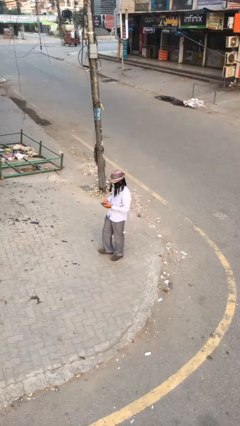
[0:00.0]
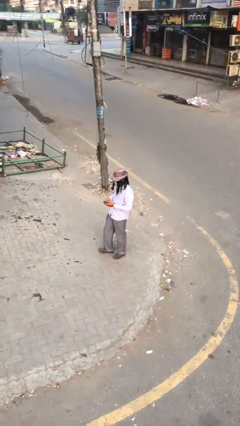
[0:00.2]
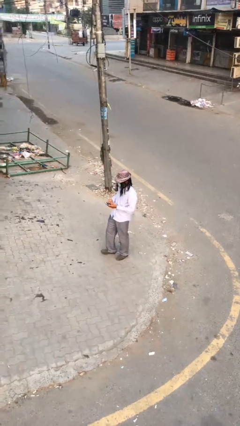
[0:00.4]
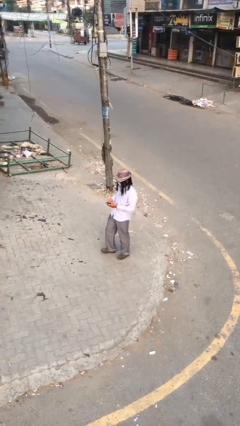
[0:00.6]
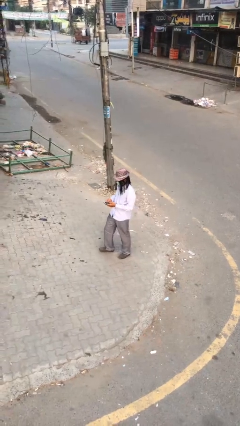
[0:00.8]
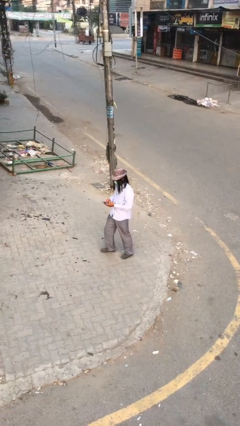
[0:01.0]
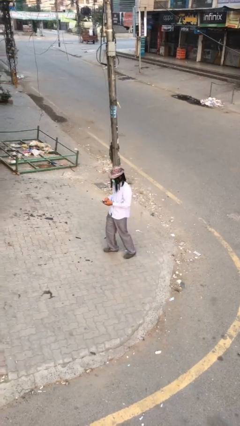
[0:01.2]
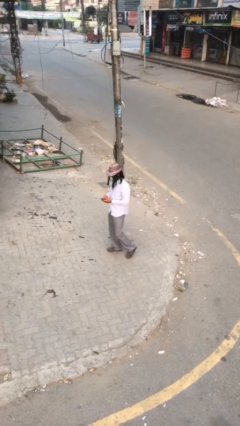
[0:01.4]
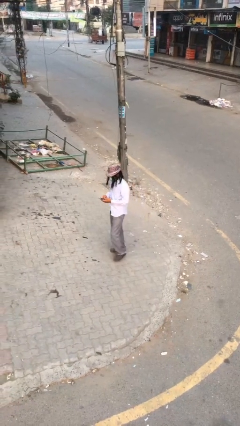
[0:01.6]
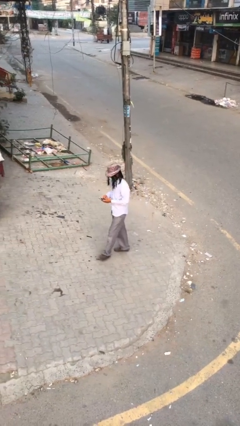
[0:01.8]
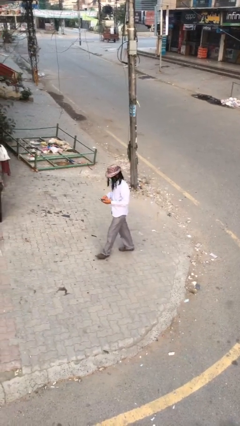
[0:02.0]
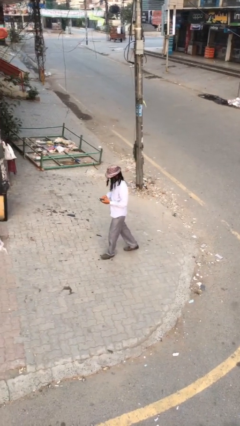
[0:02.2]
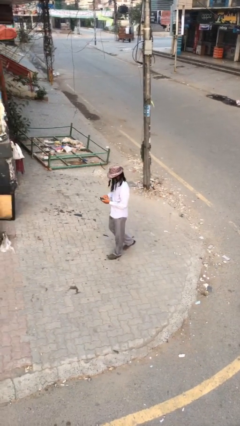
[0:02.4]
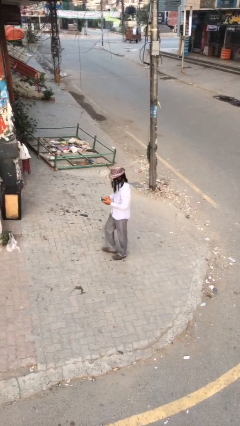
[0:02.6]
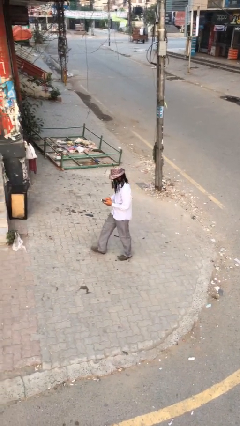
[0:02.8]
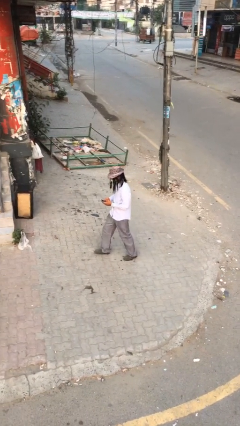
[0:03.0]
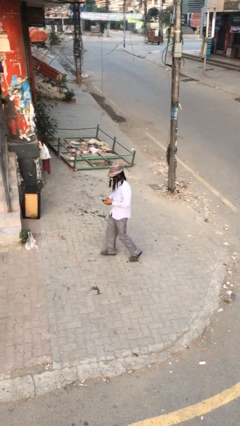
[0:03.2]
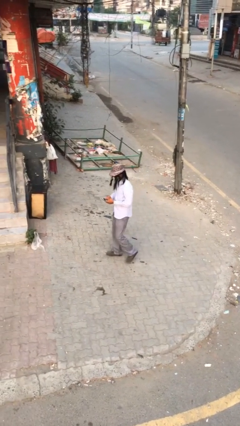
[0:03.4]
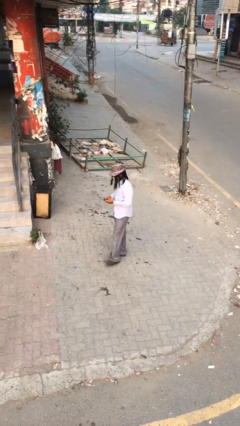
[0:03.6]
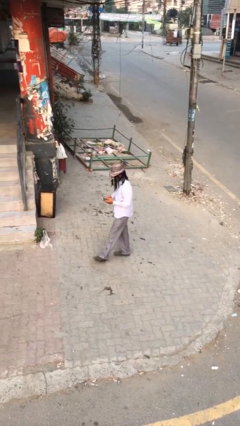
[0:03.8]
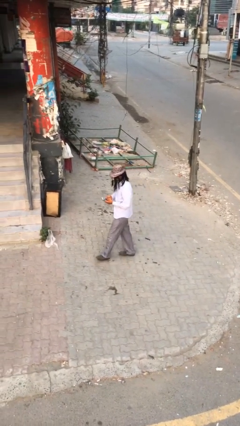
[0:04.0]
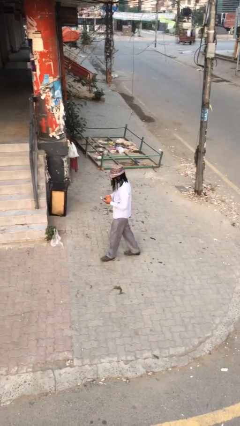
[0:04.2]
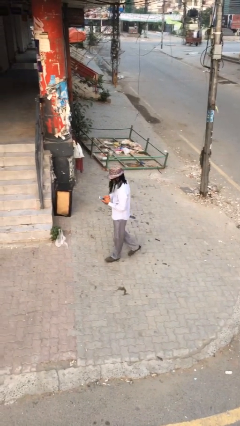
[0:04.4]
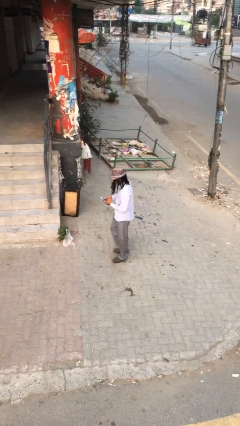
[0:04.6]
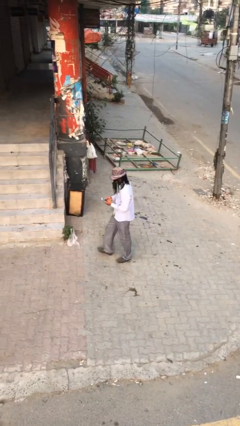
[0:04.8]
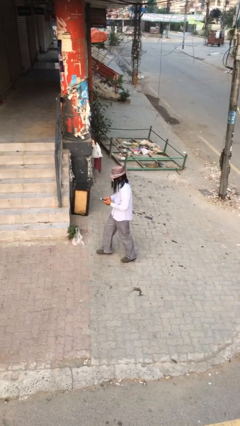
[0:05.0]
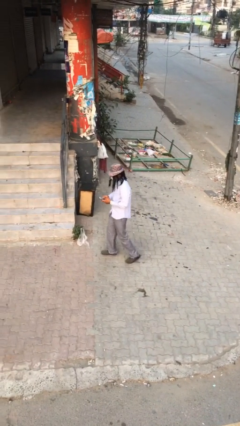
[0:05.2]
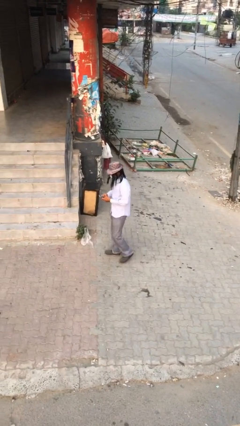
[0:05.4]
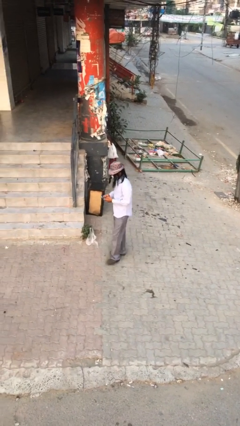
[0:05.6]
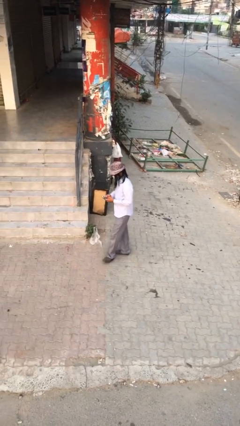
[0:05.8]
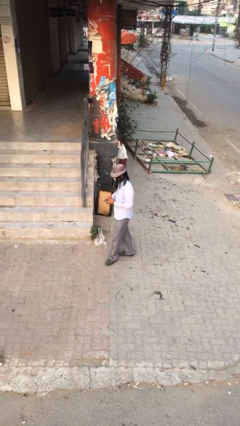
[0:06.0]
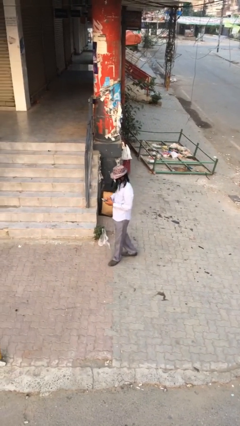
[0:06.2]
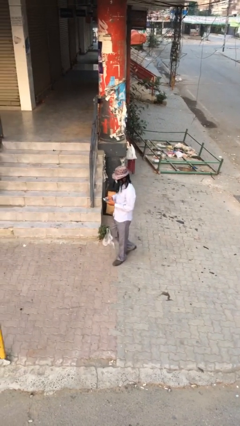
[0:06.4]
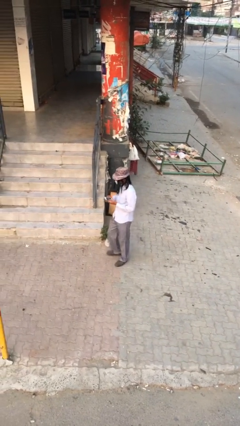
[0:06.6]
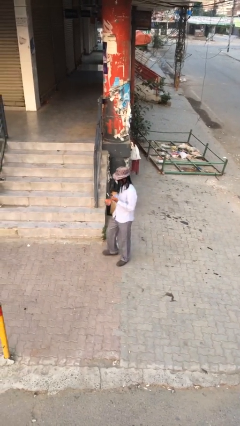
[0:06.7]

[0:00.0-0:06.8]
person texts on phone

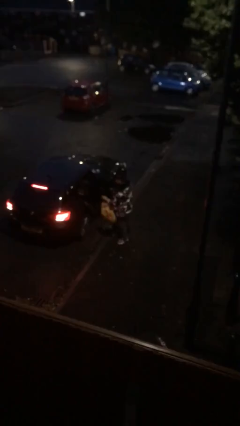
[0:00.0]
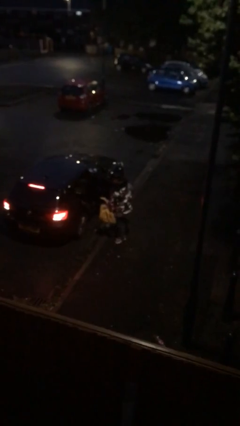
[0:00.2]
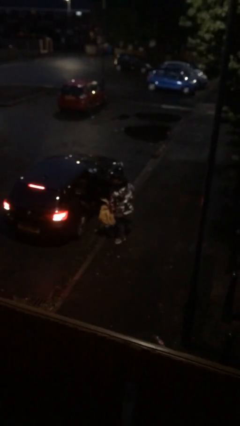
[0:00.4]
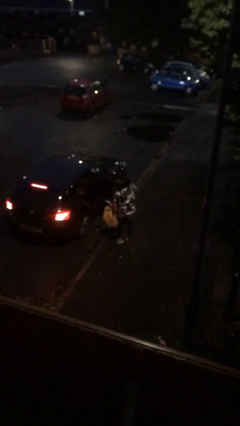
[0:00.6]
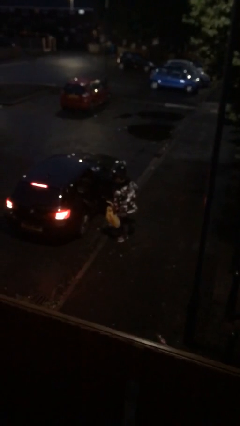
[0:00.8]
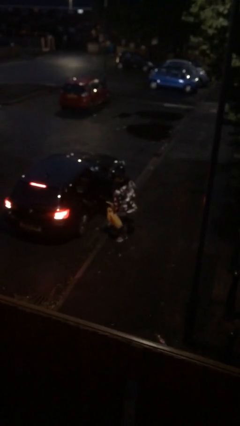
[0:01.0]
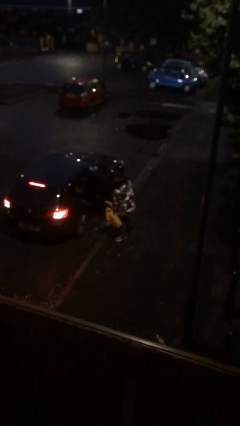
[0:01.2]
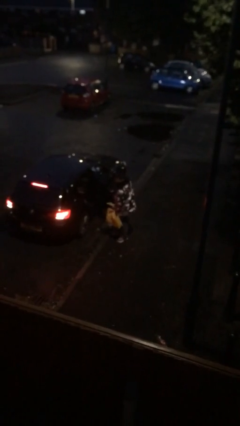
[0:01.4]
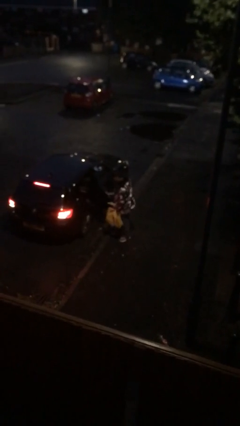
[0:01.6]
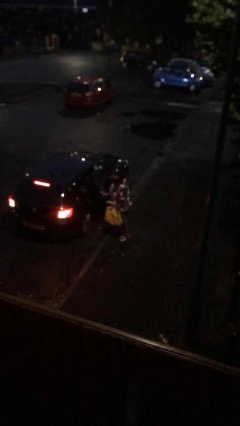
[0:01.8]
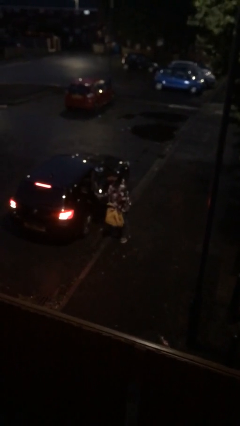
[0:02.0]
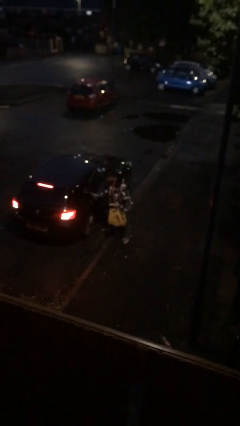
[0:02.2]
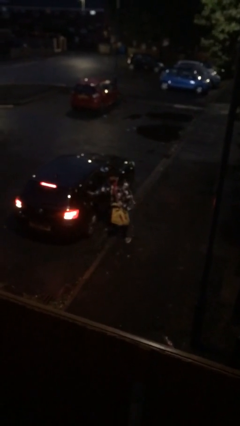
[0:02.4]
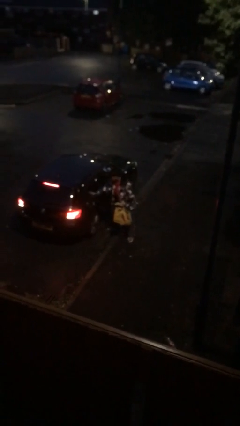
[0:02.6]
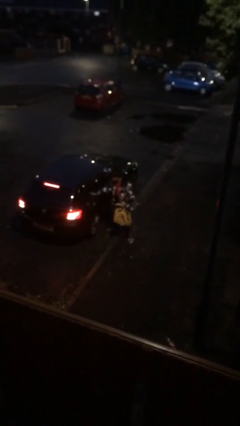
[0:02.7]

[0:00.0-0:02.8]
person closes car door

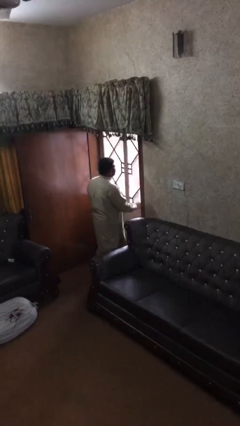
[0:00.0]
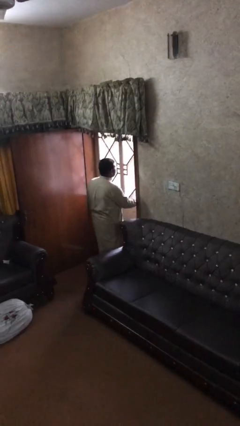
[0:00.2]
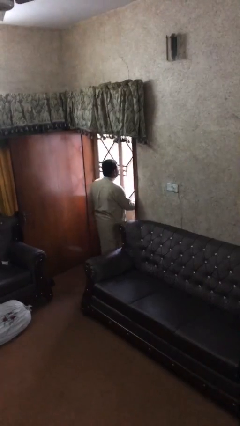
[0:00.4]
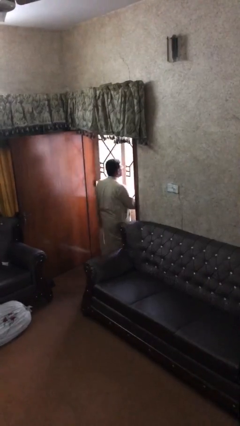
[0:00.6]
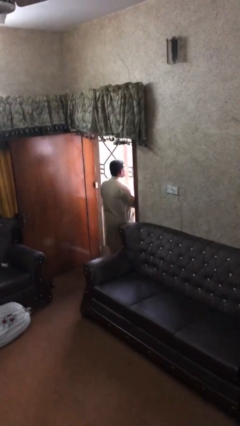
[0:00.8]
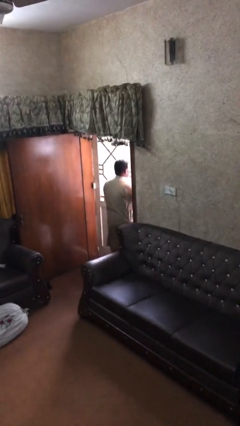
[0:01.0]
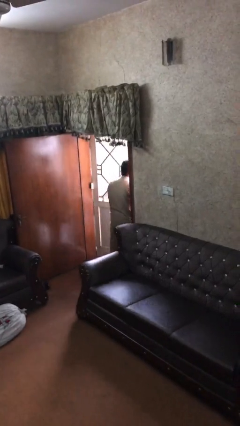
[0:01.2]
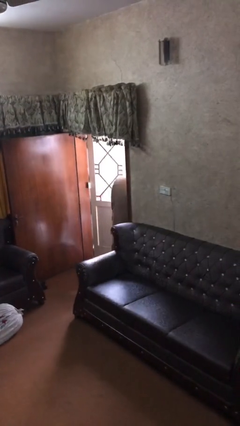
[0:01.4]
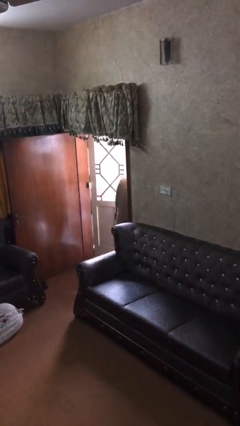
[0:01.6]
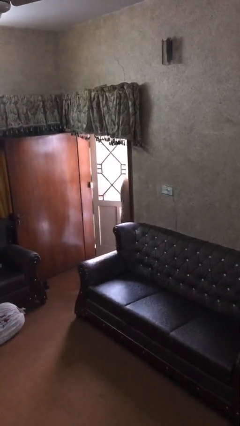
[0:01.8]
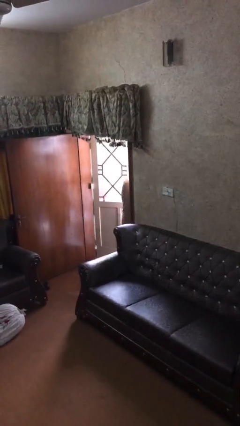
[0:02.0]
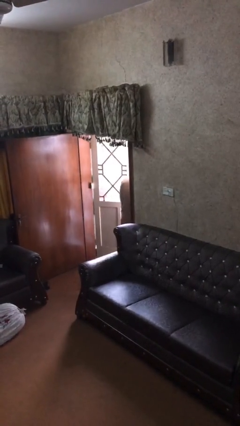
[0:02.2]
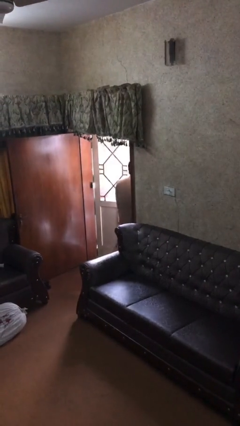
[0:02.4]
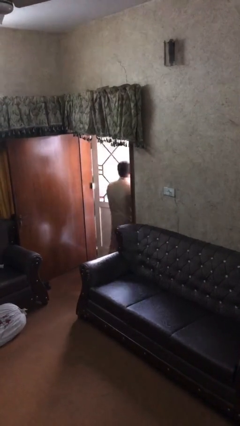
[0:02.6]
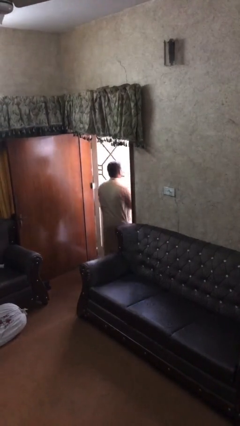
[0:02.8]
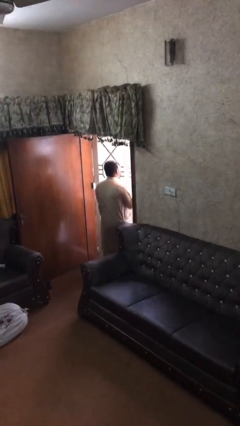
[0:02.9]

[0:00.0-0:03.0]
person opens facility door

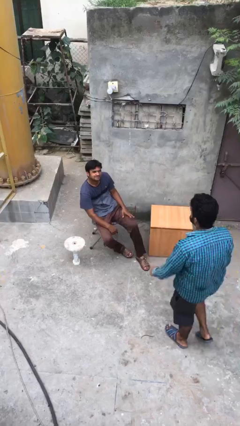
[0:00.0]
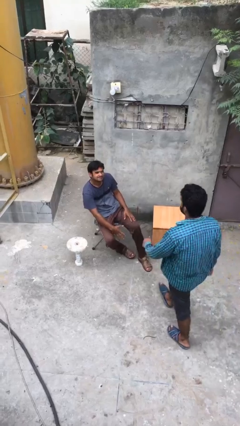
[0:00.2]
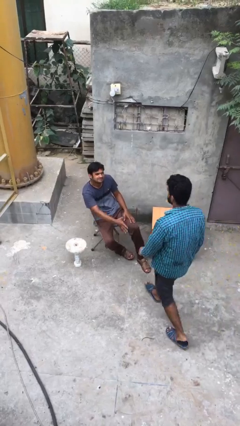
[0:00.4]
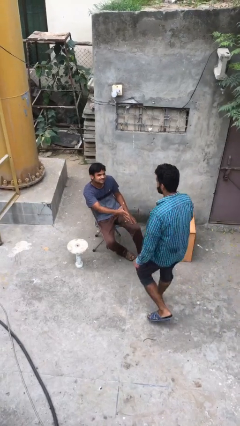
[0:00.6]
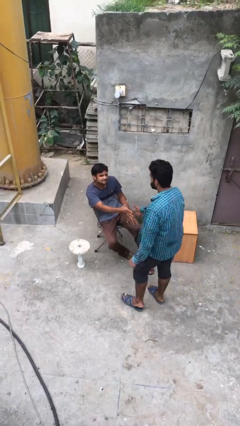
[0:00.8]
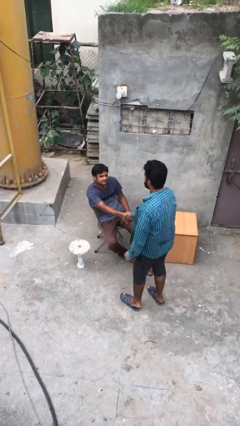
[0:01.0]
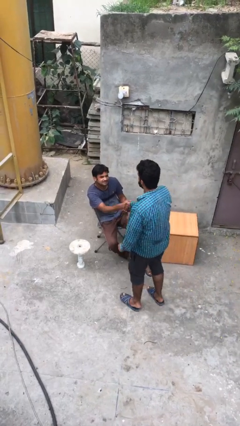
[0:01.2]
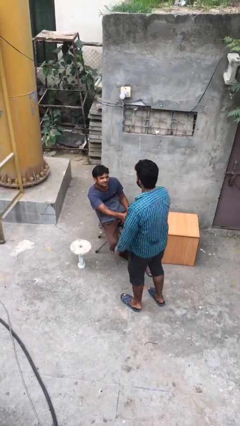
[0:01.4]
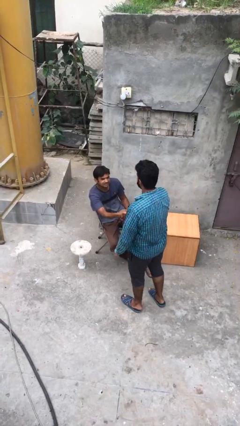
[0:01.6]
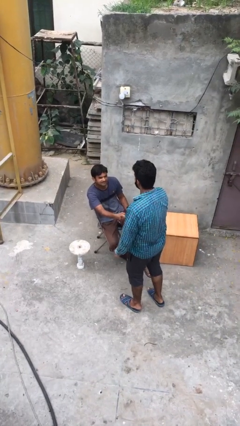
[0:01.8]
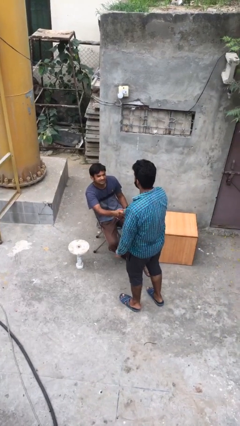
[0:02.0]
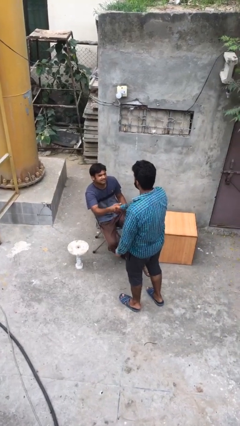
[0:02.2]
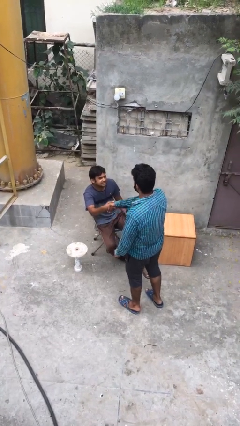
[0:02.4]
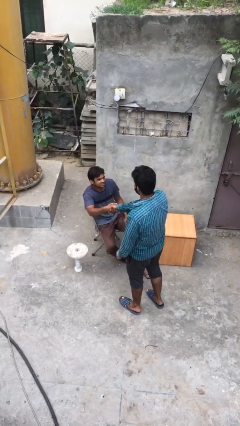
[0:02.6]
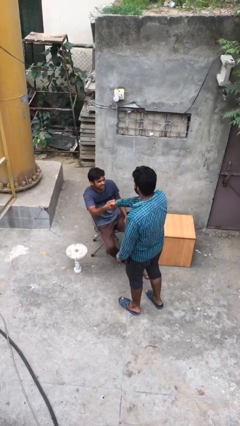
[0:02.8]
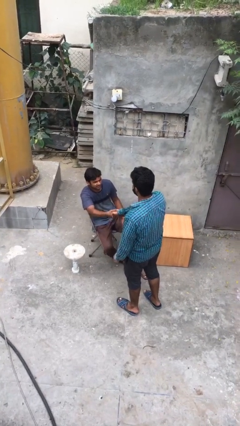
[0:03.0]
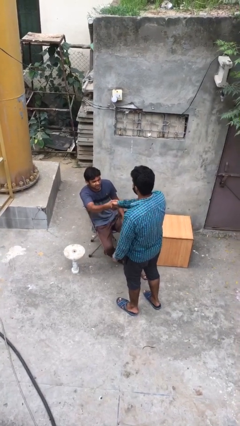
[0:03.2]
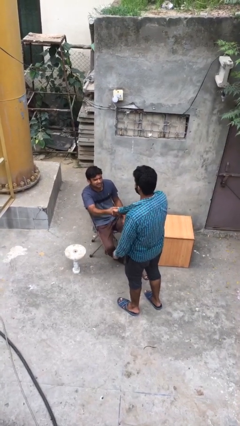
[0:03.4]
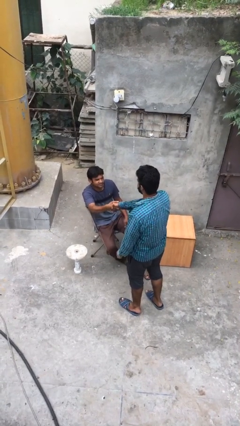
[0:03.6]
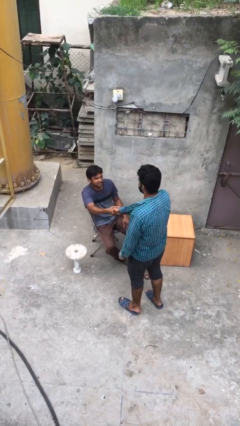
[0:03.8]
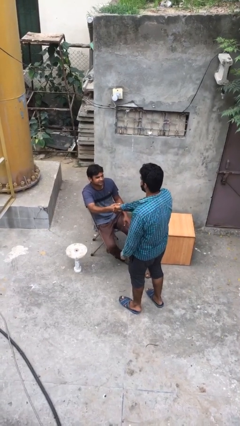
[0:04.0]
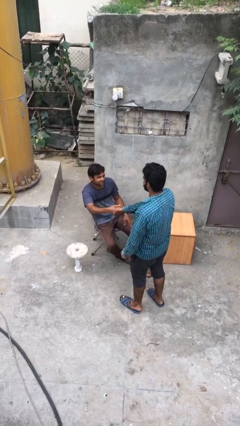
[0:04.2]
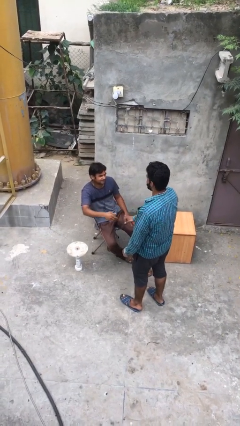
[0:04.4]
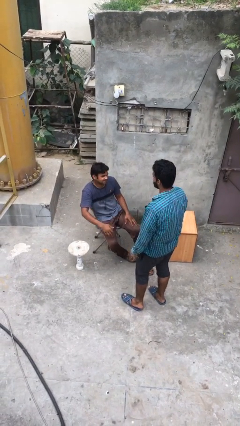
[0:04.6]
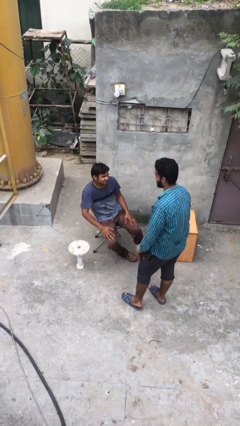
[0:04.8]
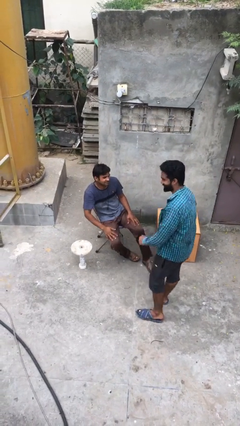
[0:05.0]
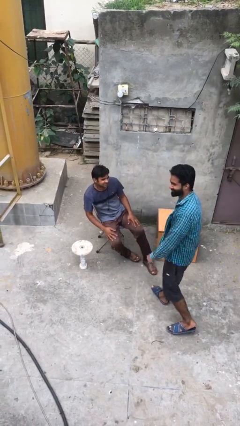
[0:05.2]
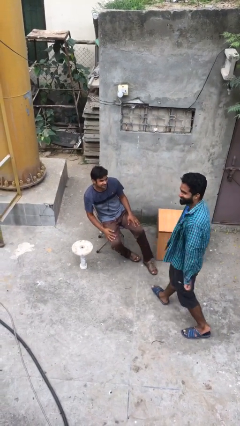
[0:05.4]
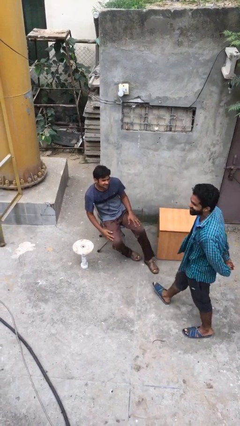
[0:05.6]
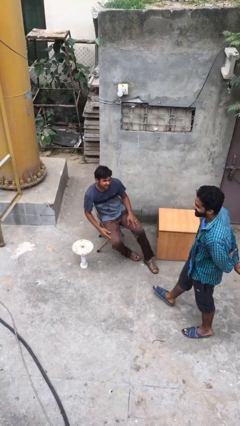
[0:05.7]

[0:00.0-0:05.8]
person shakes hand
